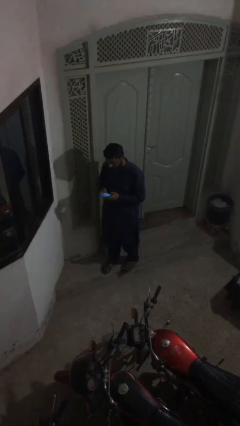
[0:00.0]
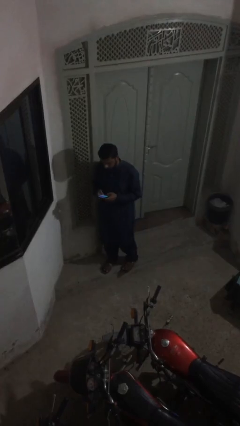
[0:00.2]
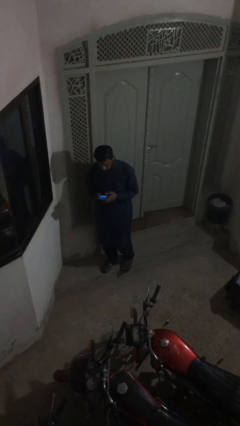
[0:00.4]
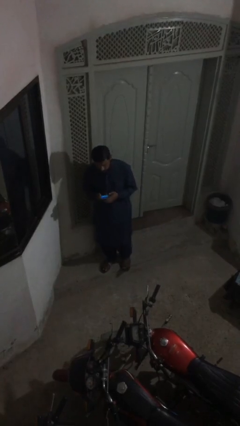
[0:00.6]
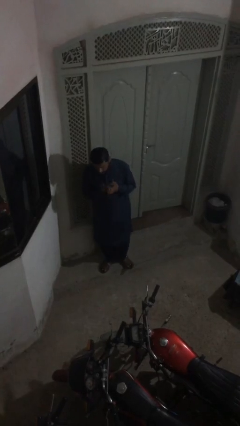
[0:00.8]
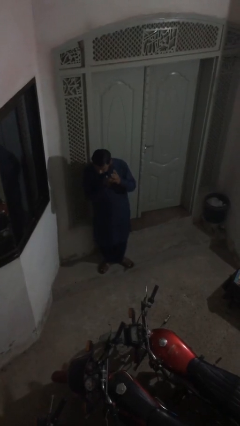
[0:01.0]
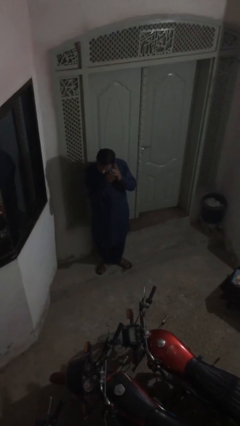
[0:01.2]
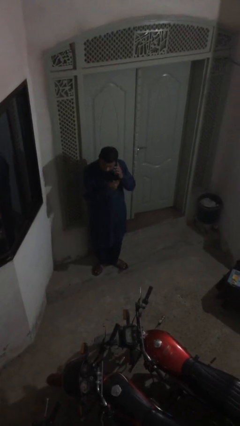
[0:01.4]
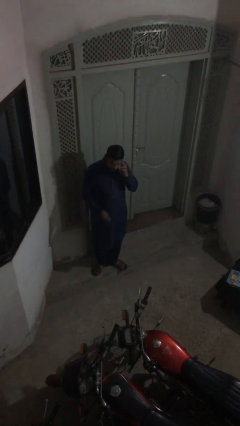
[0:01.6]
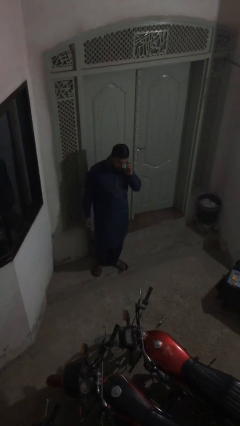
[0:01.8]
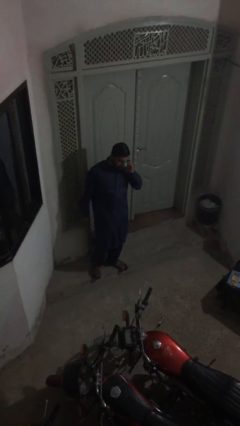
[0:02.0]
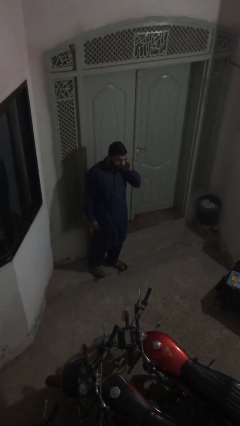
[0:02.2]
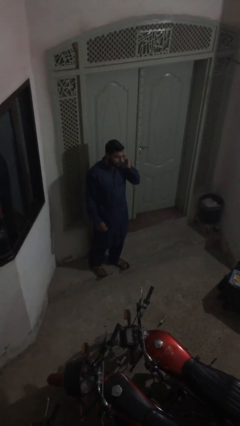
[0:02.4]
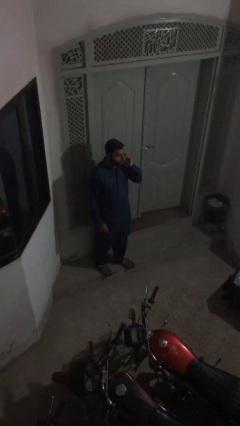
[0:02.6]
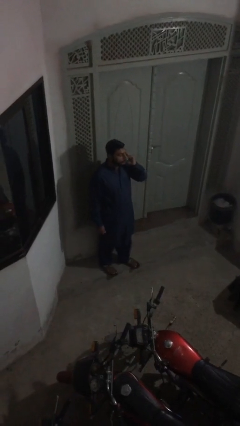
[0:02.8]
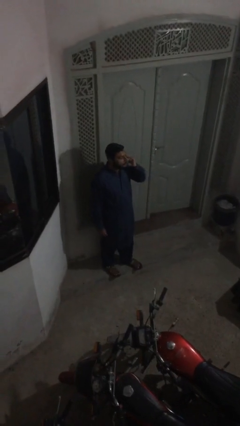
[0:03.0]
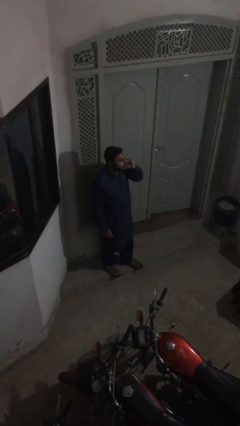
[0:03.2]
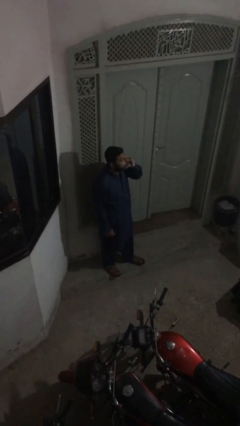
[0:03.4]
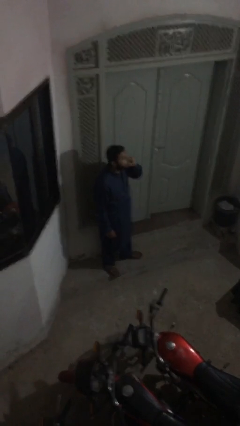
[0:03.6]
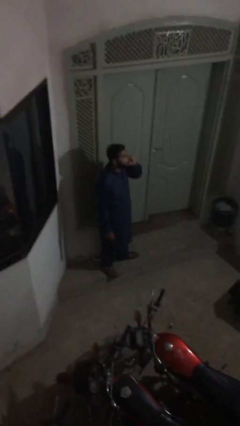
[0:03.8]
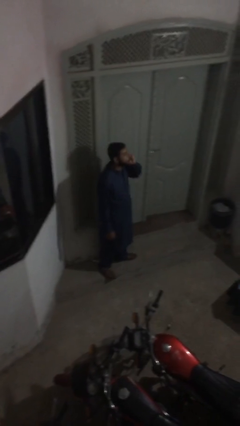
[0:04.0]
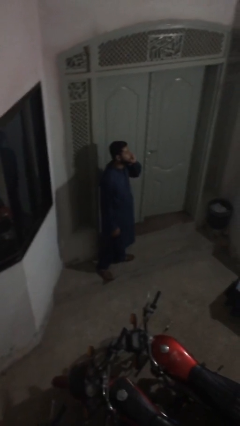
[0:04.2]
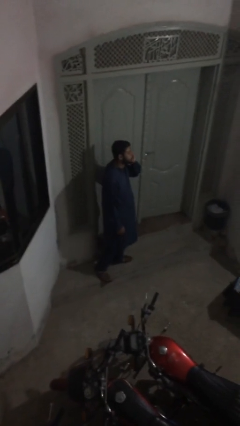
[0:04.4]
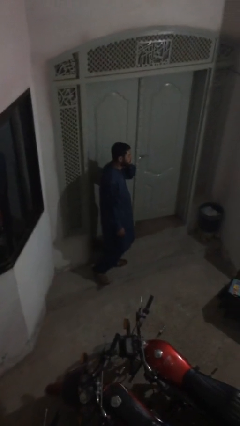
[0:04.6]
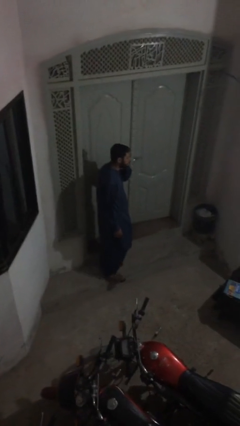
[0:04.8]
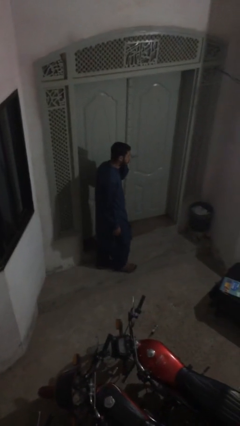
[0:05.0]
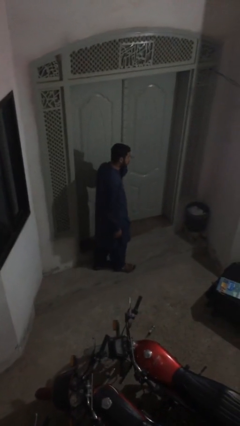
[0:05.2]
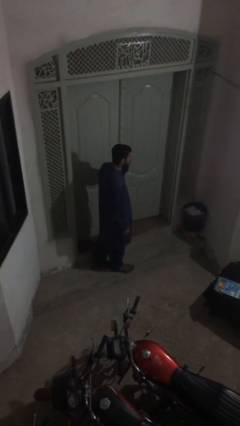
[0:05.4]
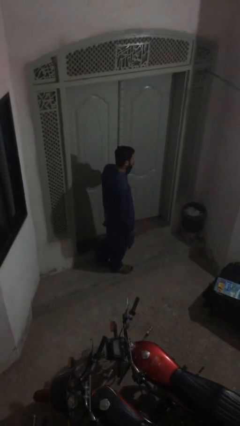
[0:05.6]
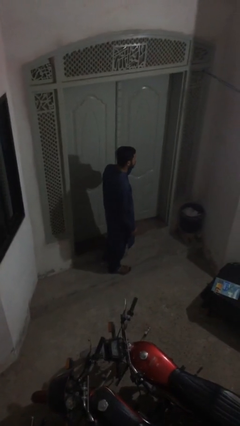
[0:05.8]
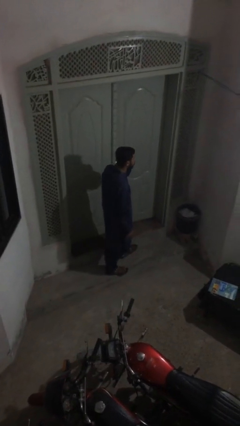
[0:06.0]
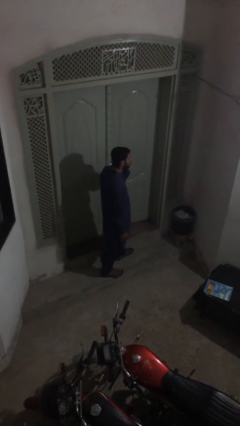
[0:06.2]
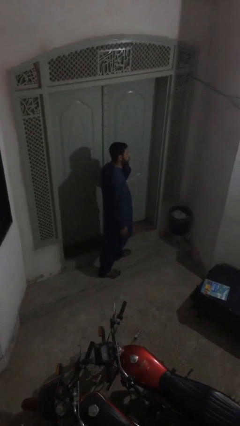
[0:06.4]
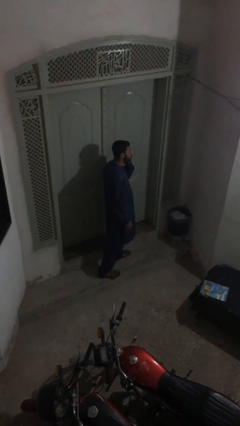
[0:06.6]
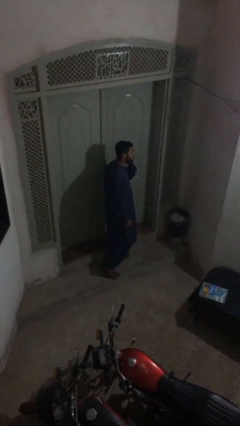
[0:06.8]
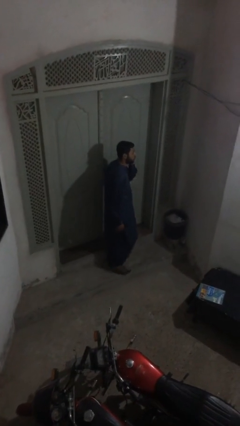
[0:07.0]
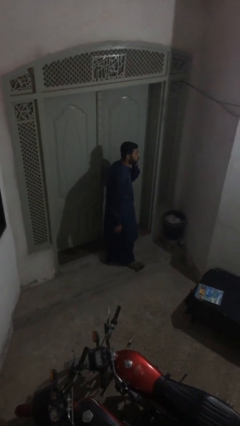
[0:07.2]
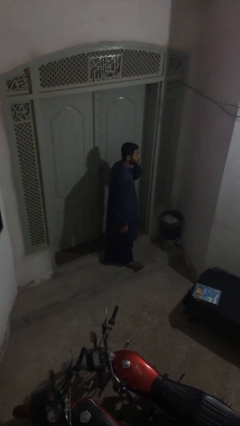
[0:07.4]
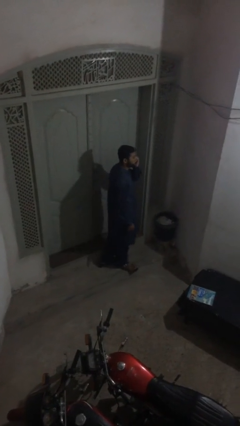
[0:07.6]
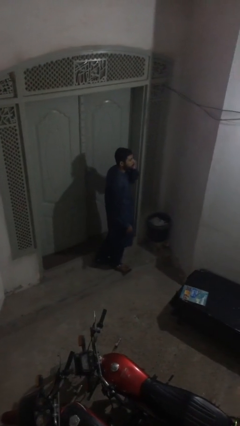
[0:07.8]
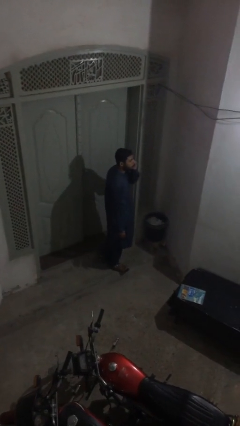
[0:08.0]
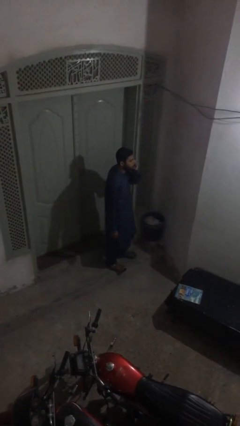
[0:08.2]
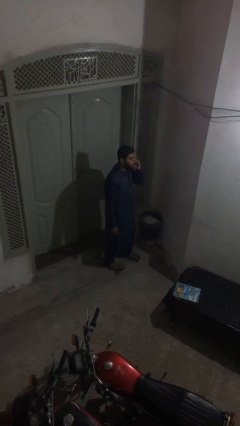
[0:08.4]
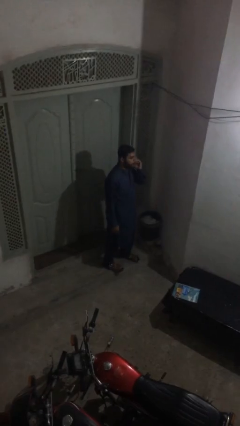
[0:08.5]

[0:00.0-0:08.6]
person talks on phone

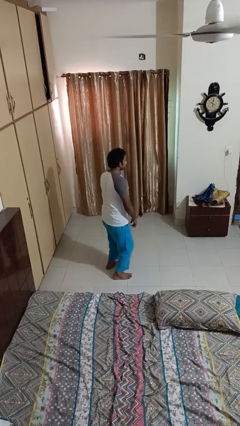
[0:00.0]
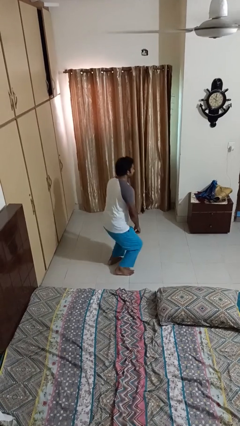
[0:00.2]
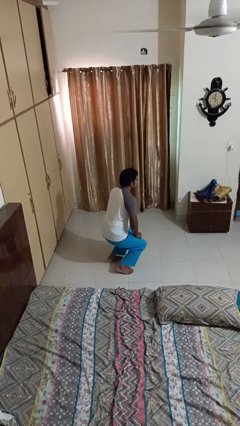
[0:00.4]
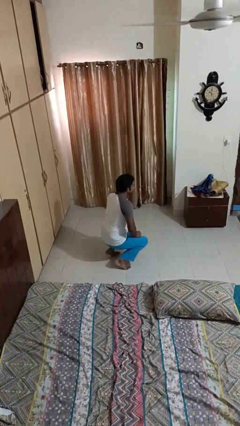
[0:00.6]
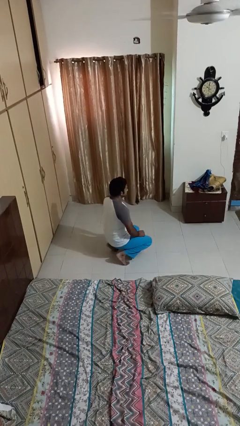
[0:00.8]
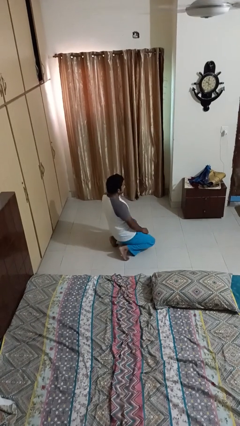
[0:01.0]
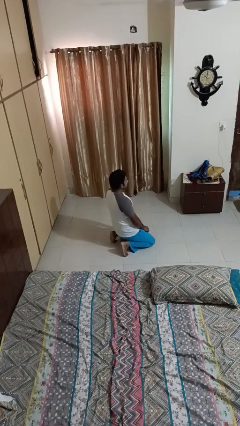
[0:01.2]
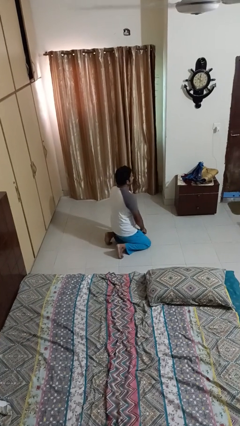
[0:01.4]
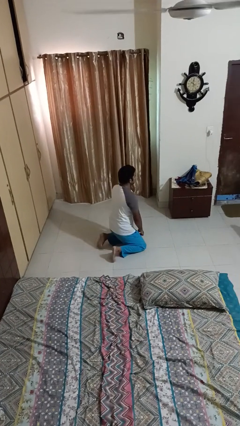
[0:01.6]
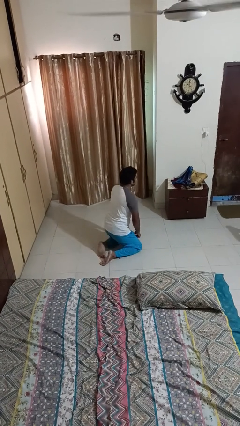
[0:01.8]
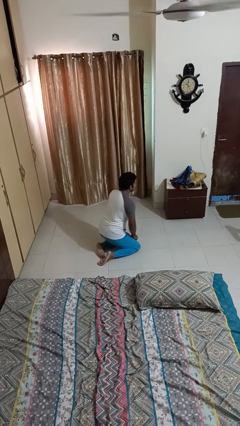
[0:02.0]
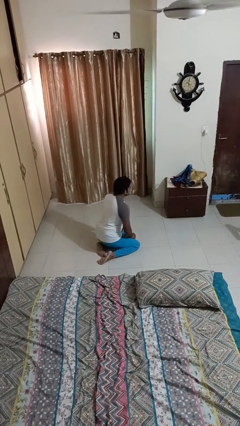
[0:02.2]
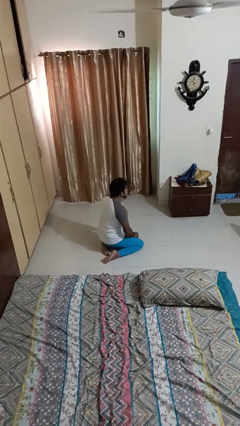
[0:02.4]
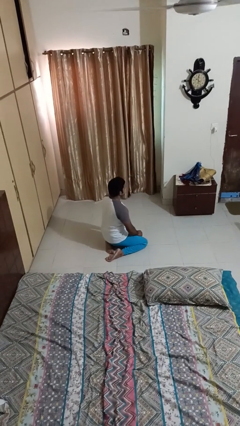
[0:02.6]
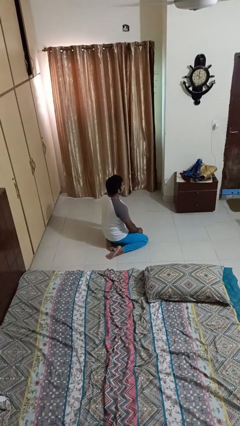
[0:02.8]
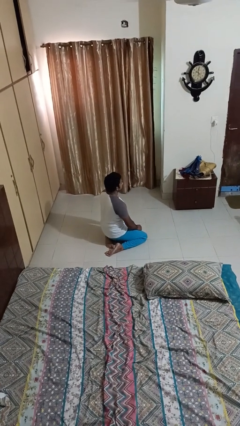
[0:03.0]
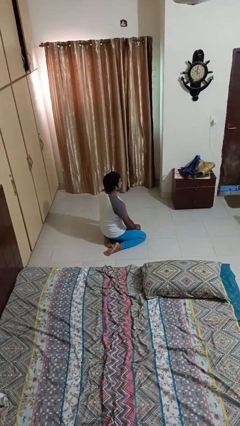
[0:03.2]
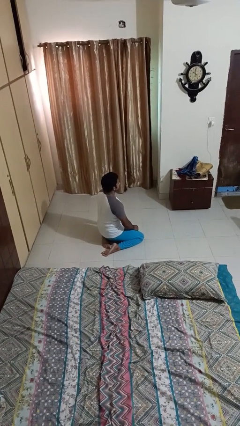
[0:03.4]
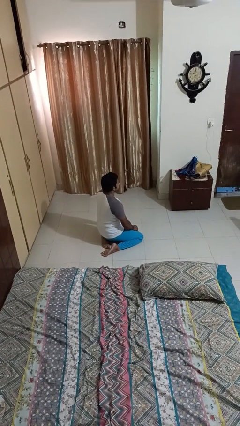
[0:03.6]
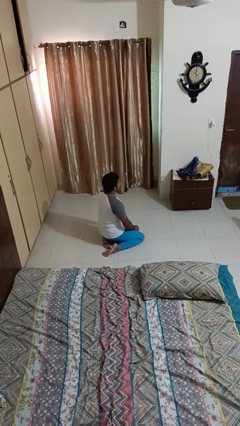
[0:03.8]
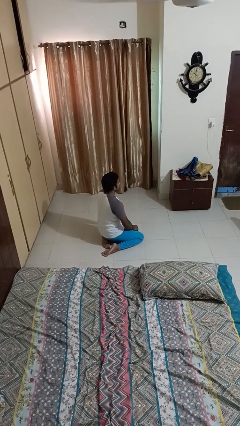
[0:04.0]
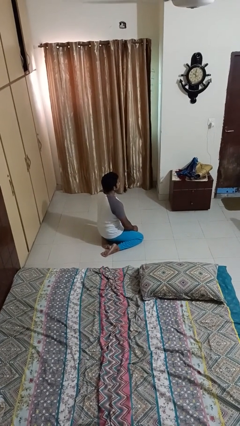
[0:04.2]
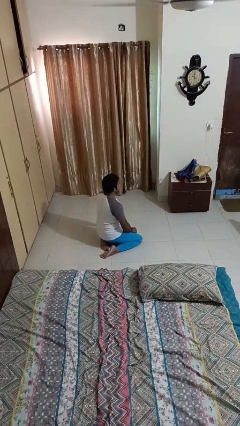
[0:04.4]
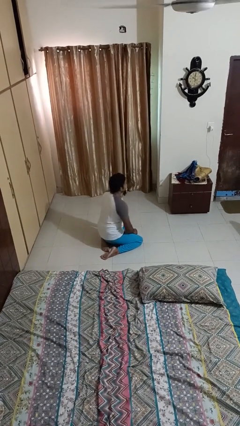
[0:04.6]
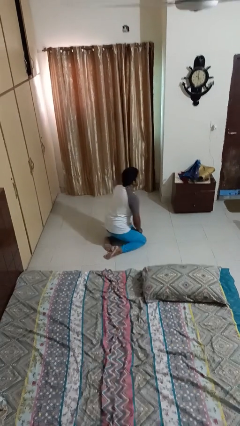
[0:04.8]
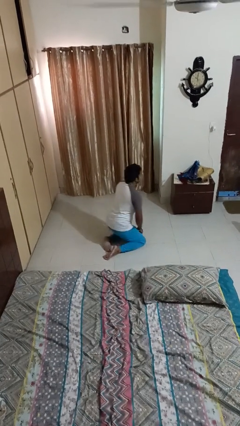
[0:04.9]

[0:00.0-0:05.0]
person kneels

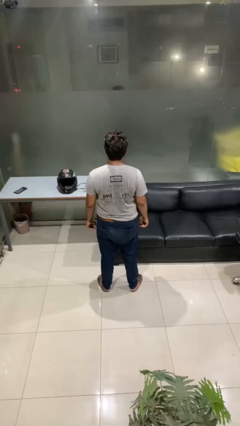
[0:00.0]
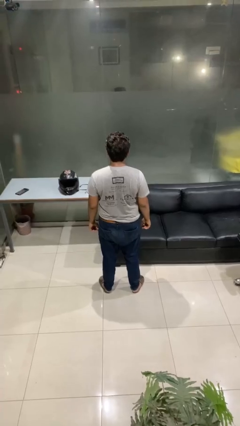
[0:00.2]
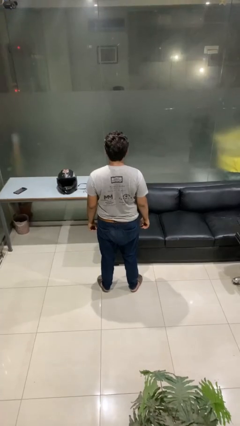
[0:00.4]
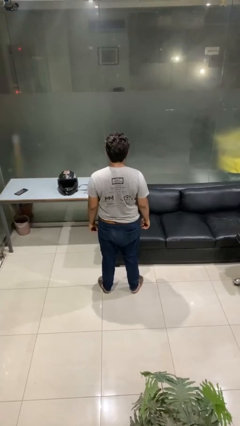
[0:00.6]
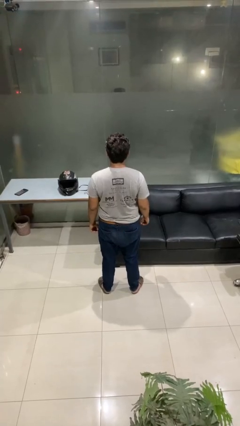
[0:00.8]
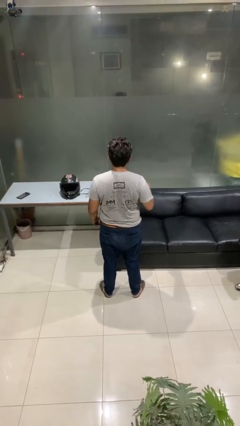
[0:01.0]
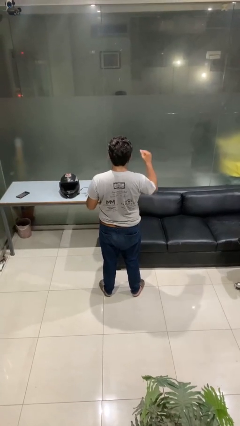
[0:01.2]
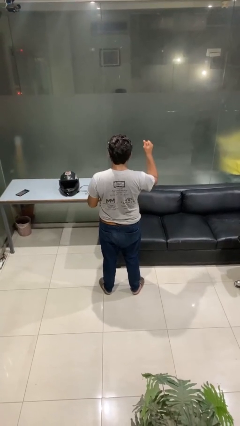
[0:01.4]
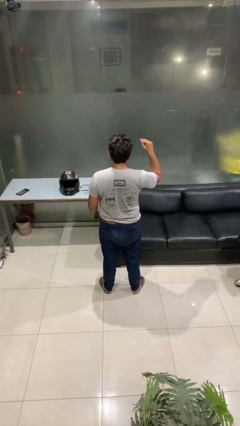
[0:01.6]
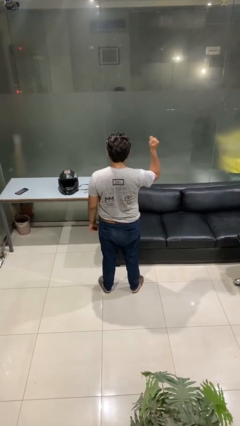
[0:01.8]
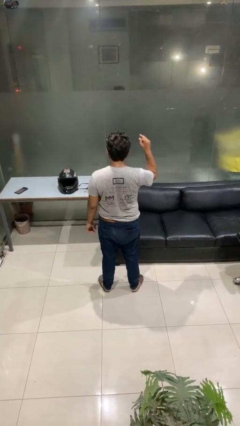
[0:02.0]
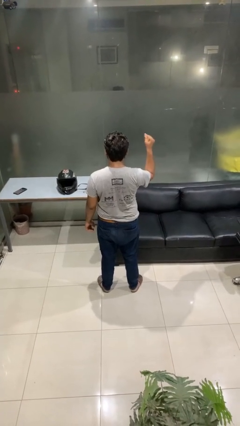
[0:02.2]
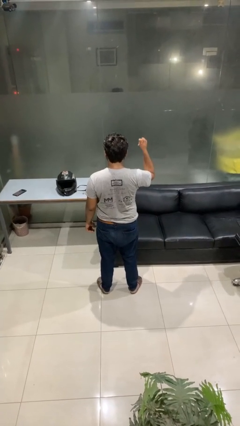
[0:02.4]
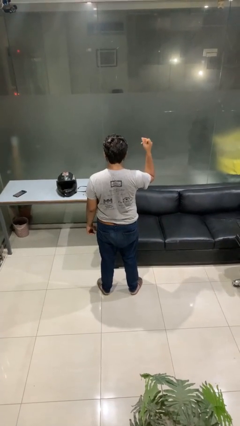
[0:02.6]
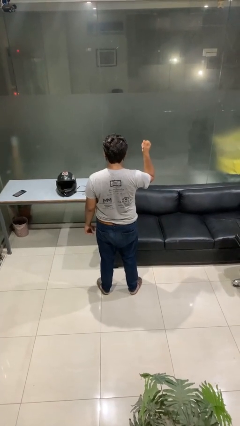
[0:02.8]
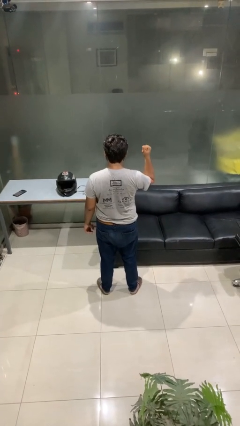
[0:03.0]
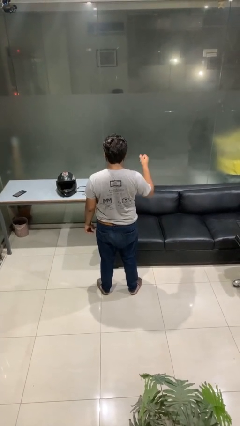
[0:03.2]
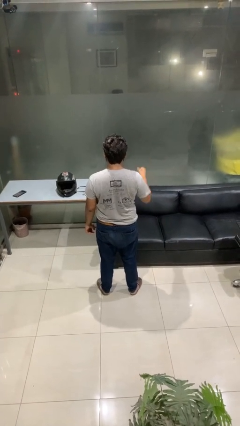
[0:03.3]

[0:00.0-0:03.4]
person snaps fingers

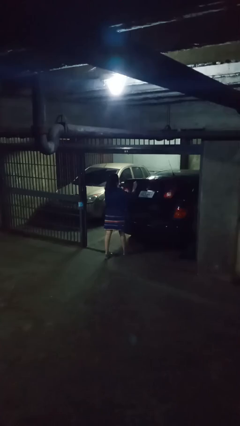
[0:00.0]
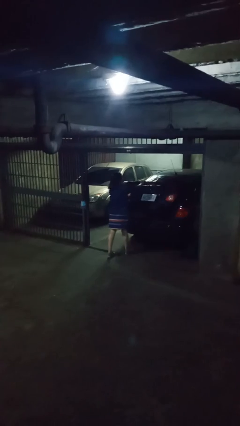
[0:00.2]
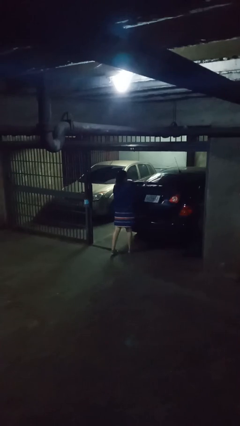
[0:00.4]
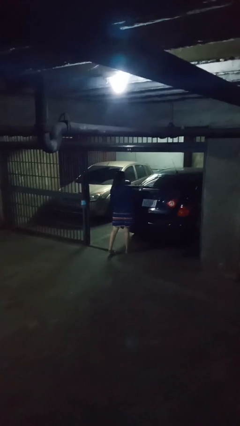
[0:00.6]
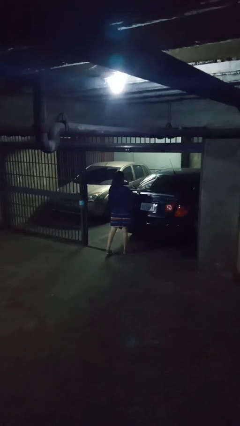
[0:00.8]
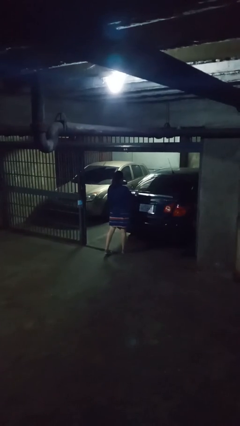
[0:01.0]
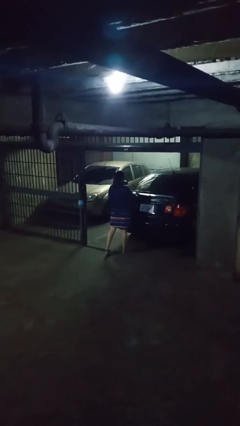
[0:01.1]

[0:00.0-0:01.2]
person closes car trunk
